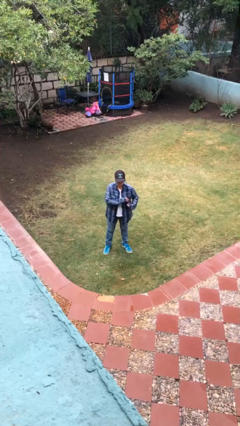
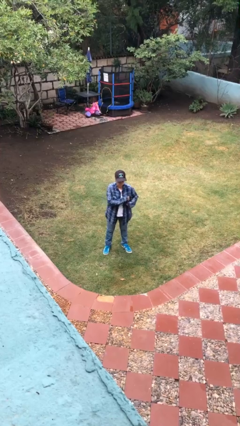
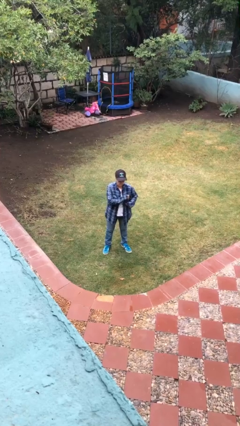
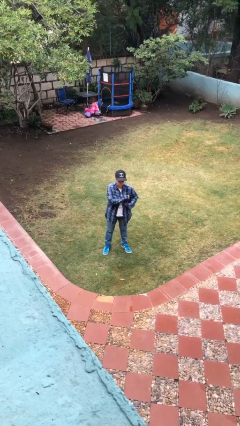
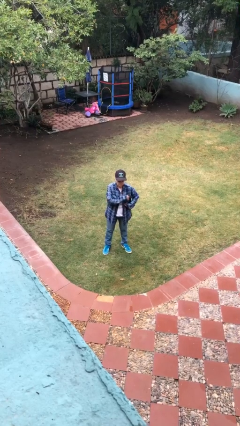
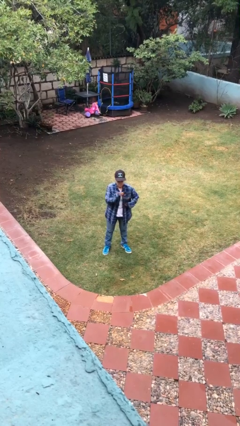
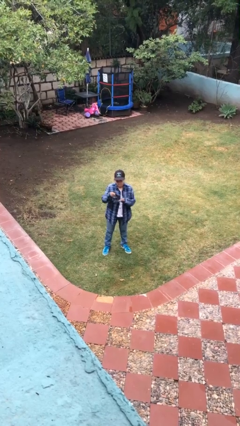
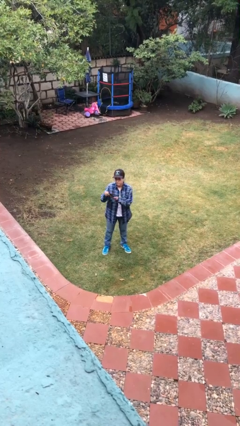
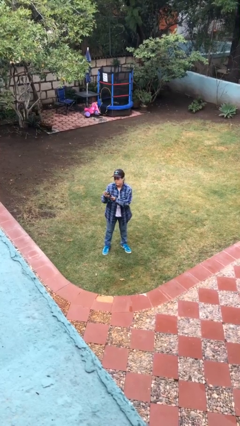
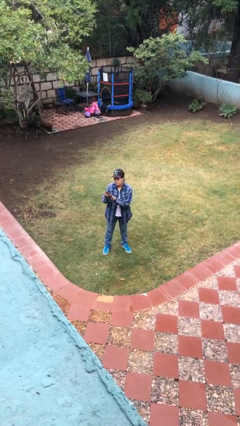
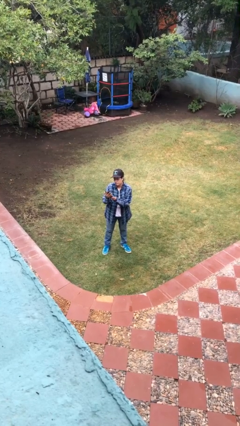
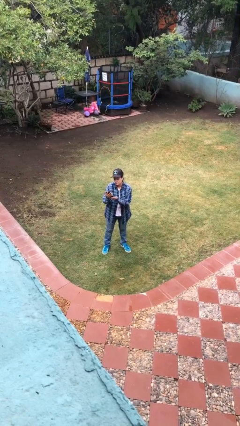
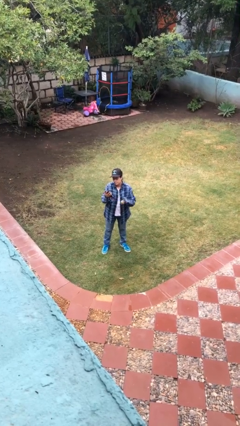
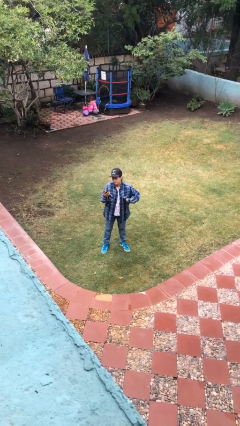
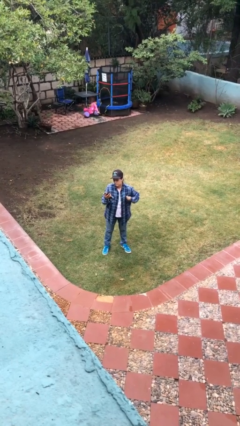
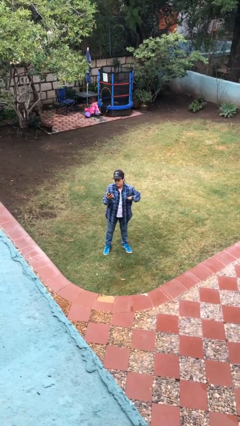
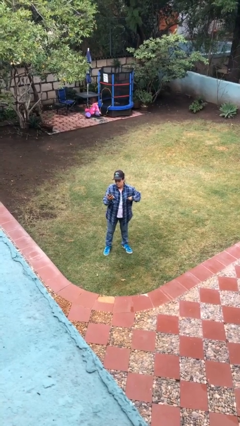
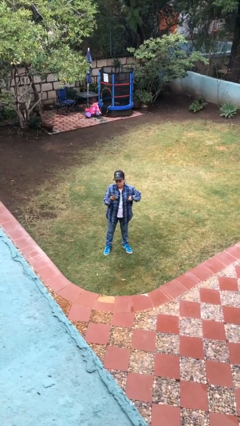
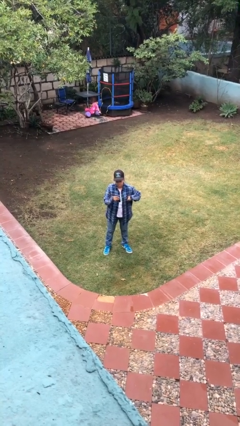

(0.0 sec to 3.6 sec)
person takes phone from pocket

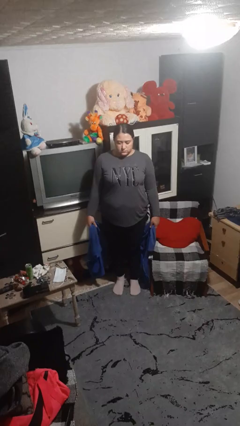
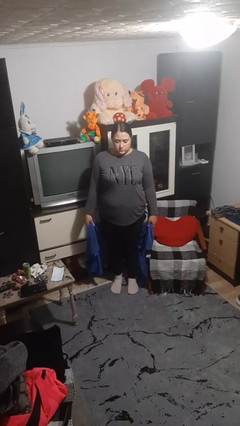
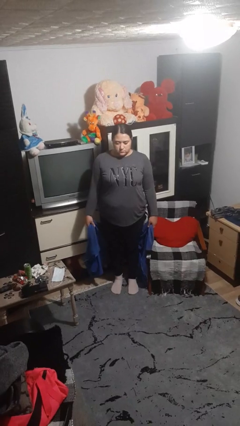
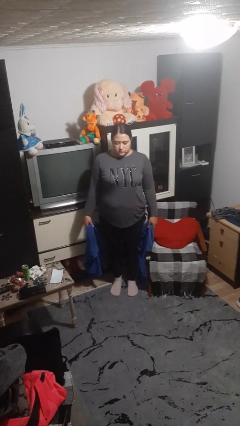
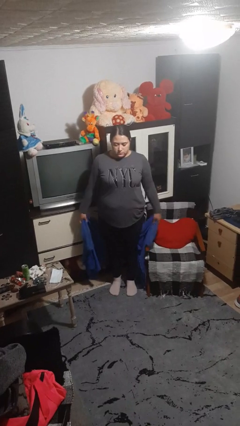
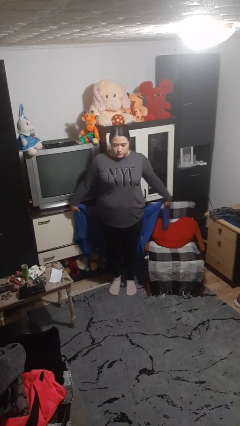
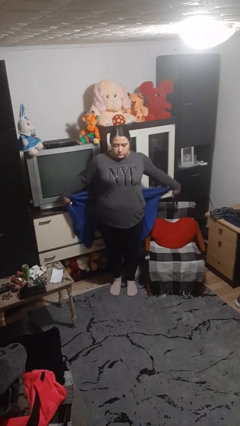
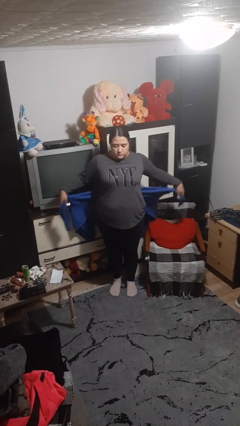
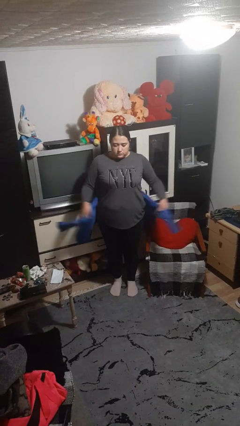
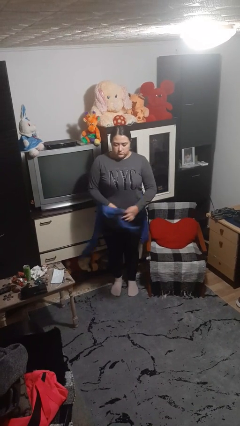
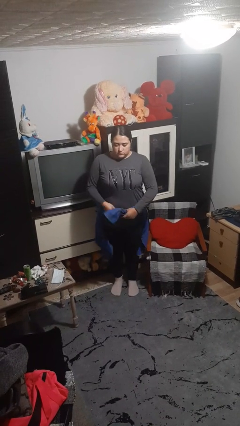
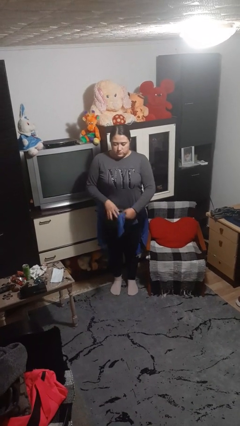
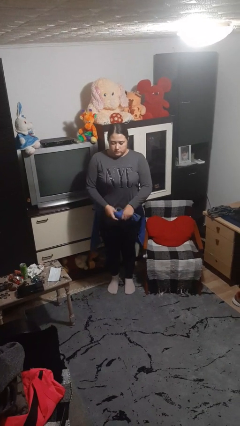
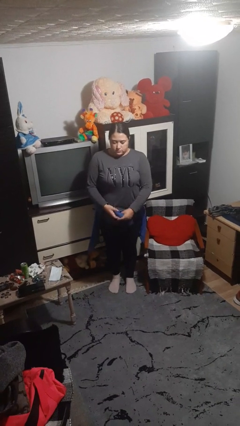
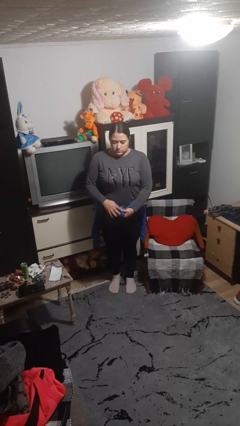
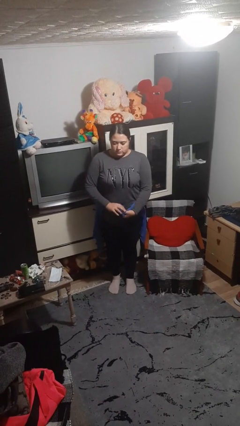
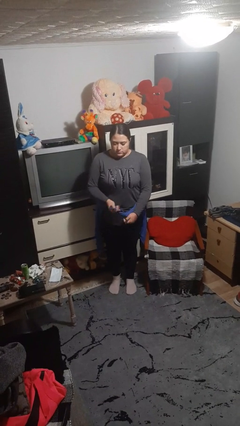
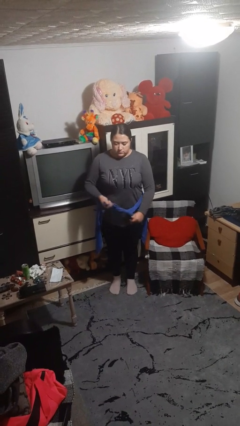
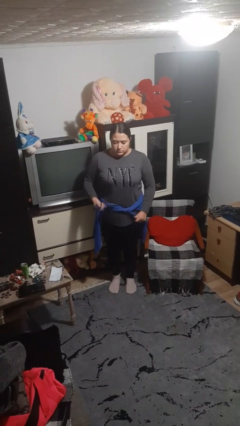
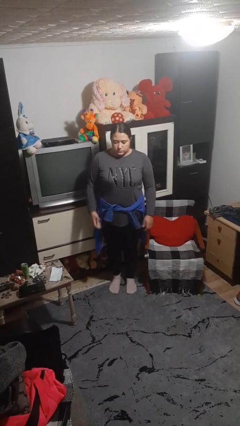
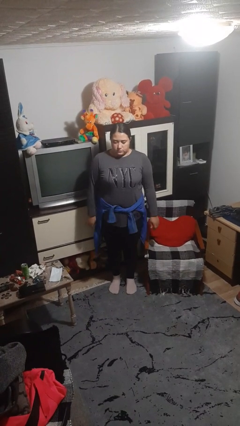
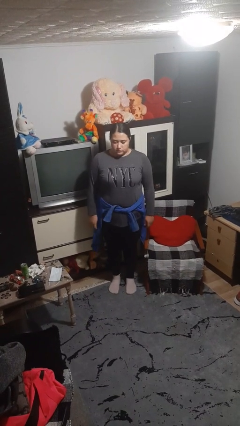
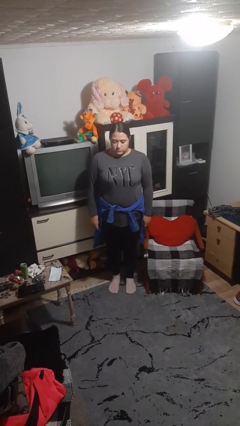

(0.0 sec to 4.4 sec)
person ties jacket around waist

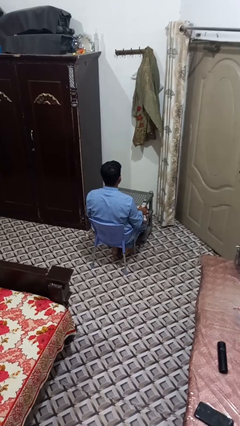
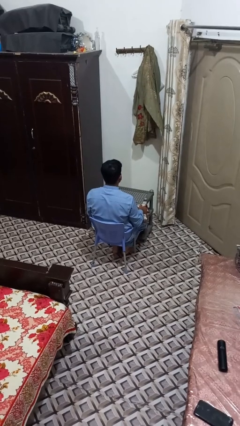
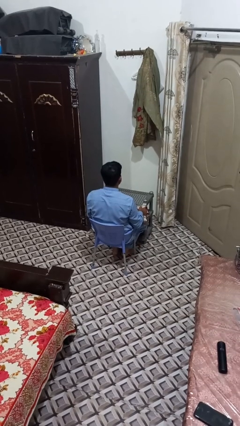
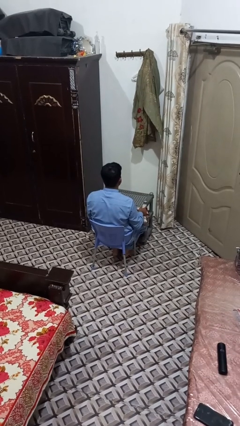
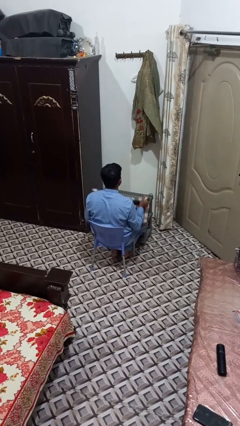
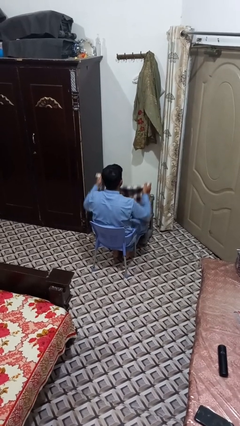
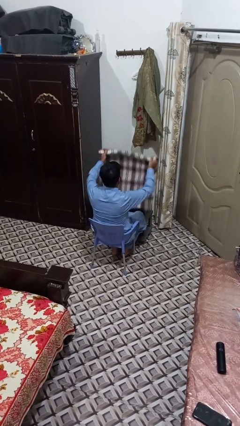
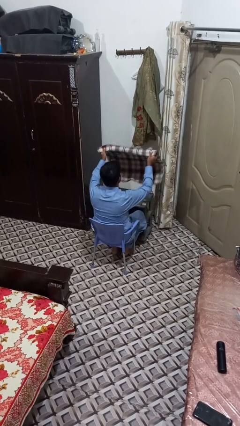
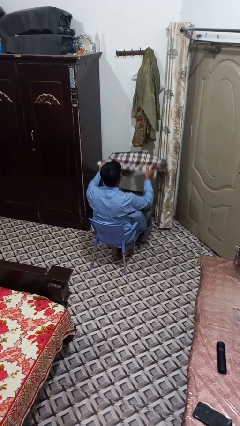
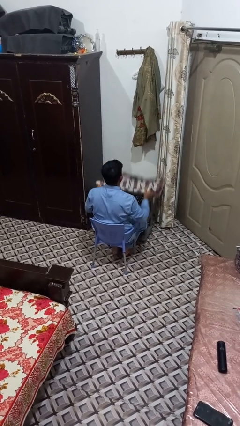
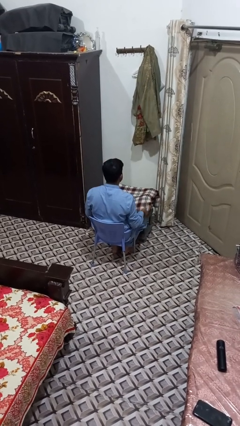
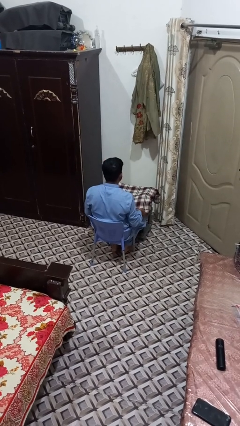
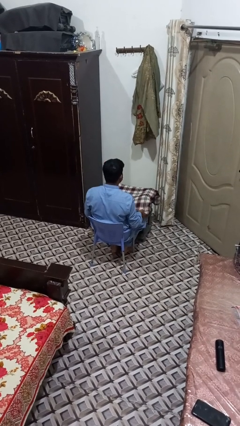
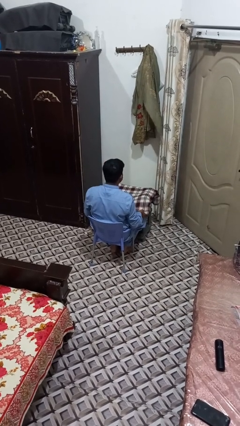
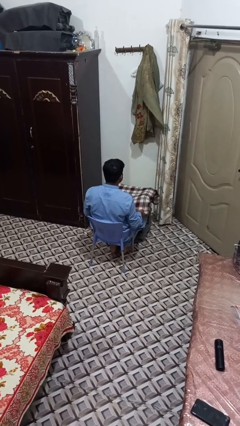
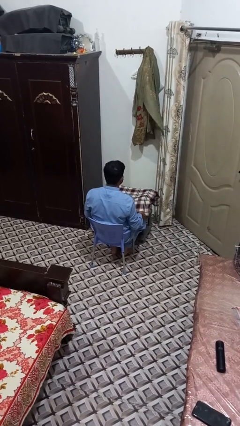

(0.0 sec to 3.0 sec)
person spreads tablecloth

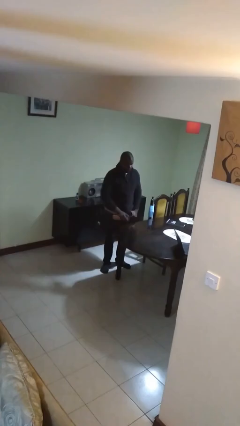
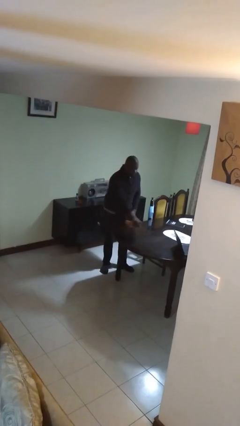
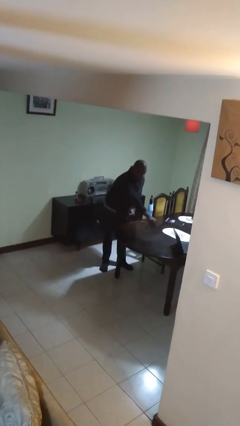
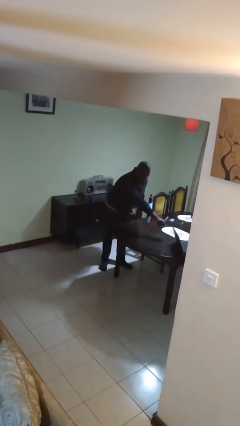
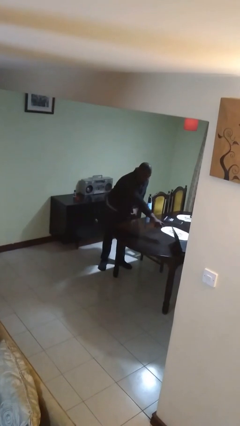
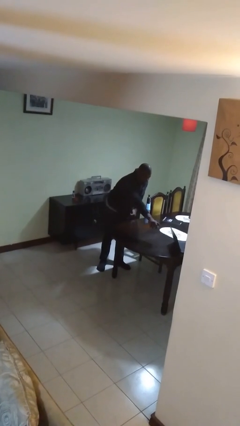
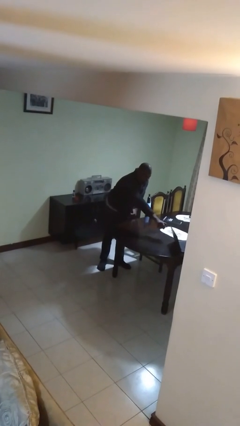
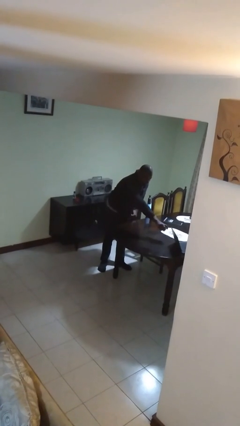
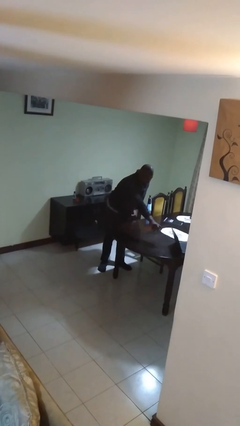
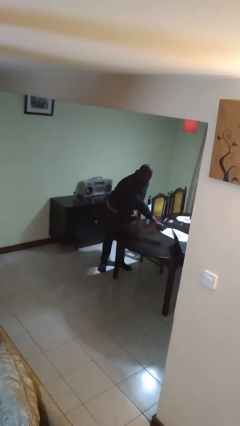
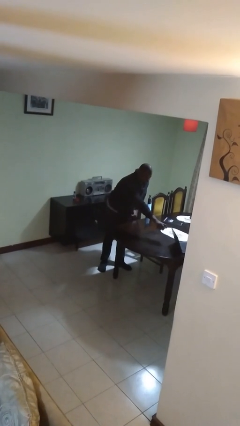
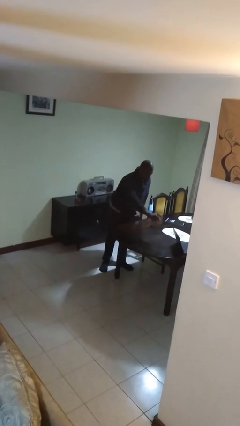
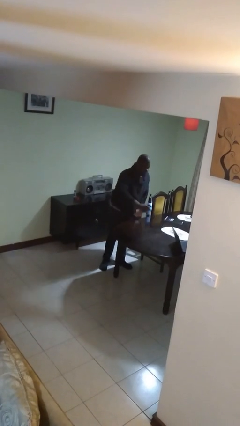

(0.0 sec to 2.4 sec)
person sprays from bottle

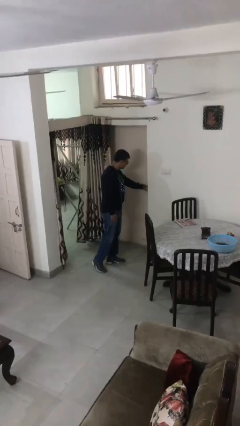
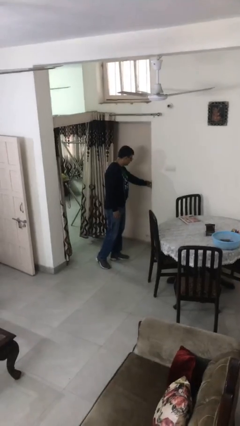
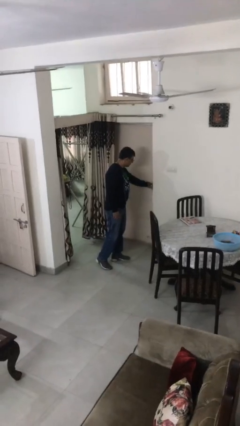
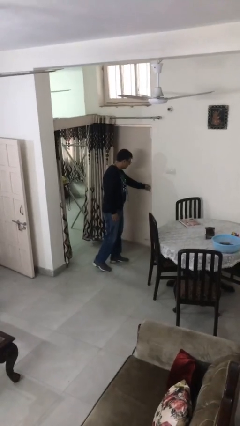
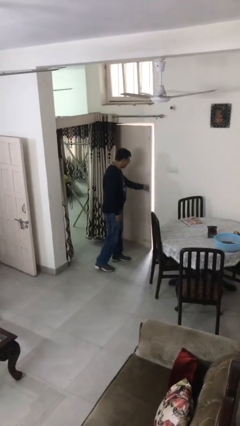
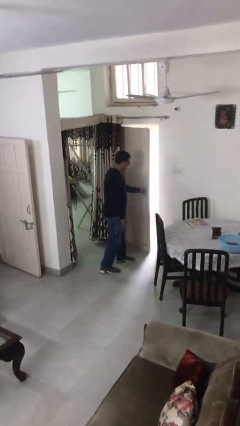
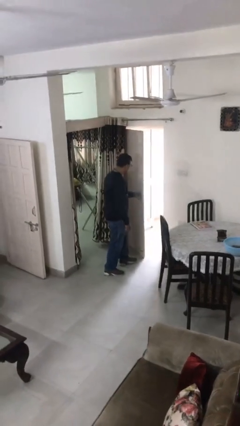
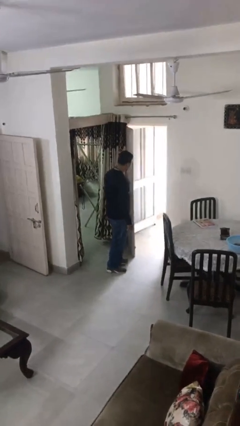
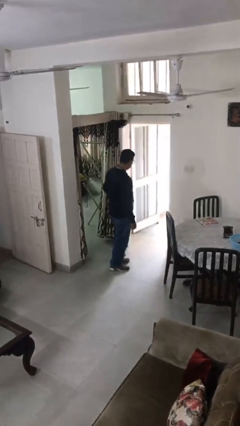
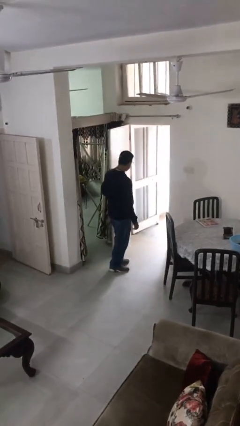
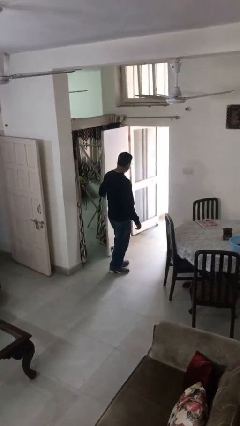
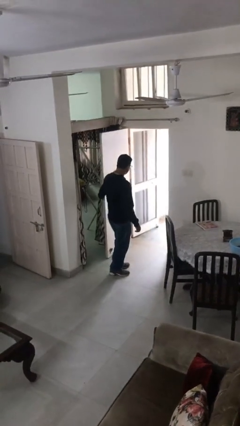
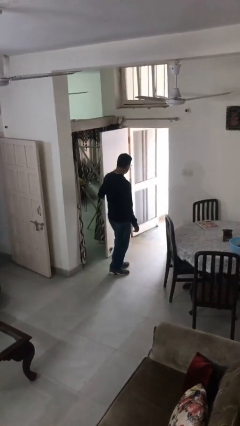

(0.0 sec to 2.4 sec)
person opens facility door

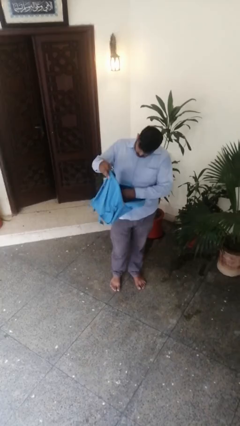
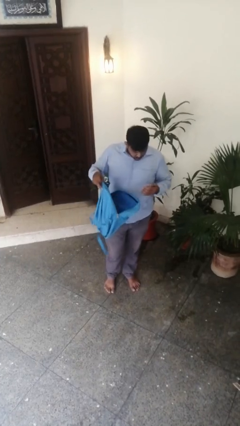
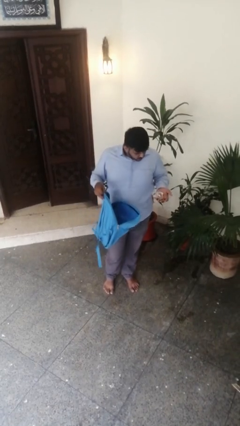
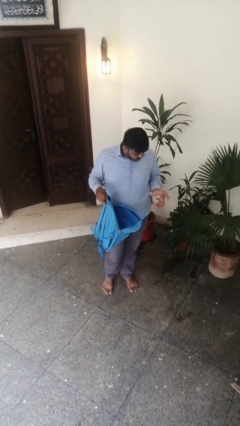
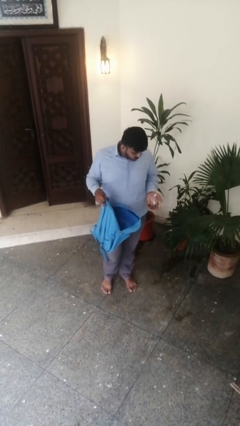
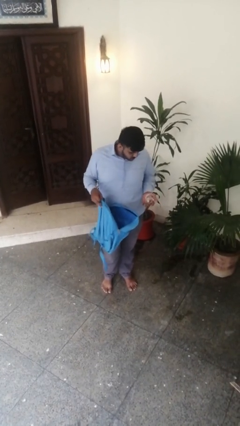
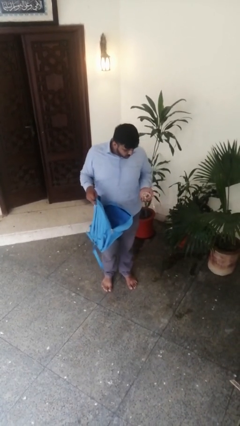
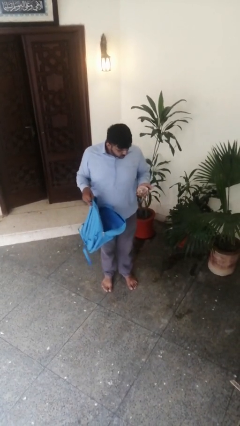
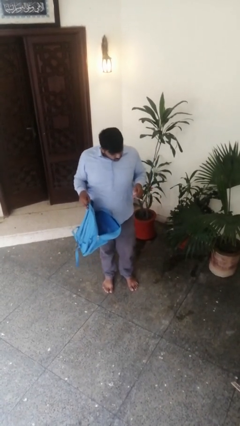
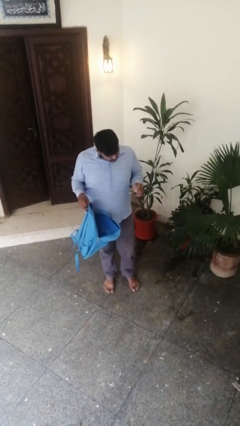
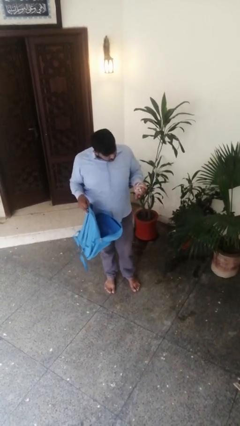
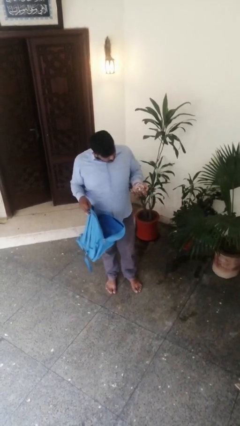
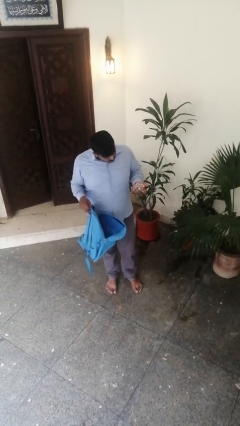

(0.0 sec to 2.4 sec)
person takes object from backpack
